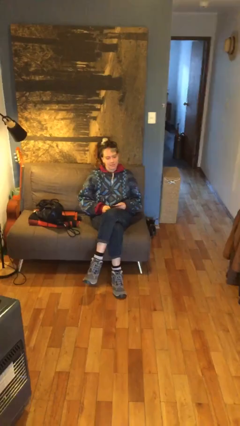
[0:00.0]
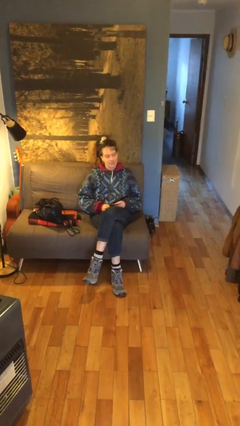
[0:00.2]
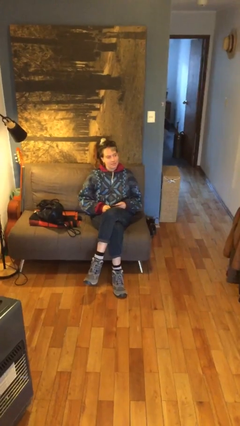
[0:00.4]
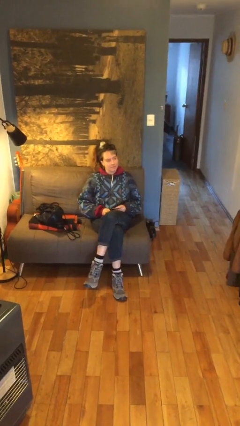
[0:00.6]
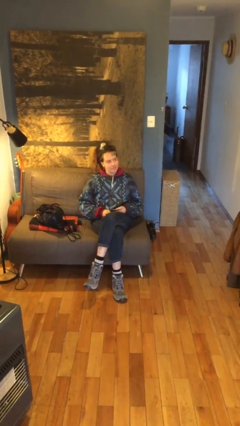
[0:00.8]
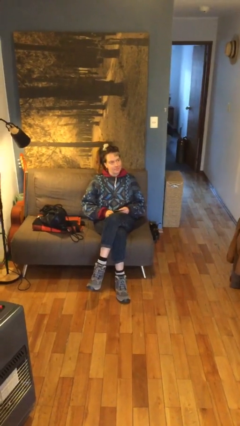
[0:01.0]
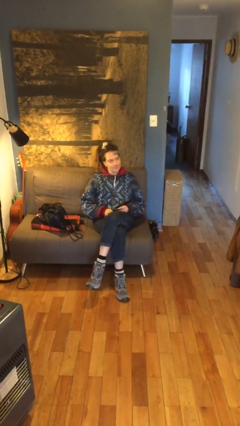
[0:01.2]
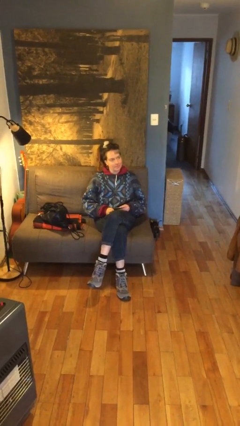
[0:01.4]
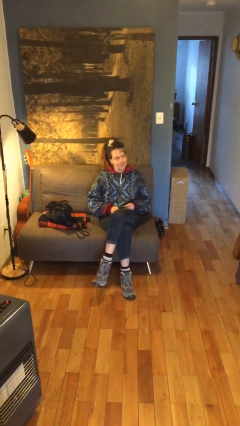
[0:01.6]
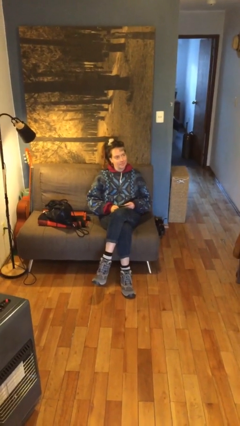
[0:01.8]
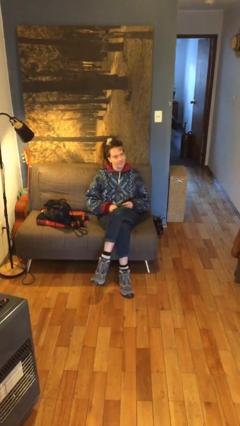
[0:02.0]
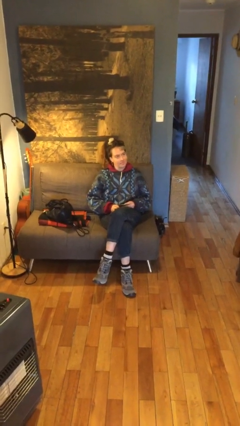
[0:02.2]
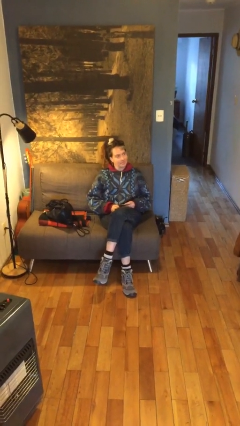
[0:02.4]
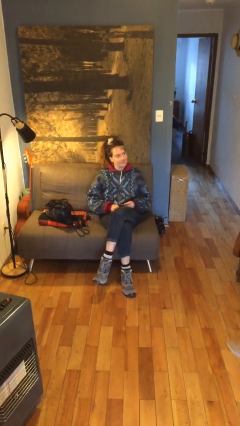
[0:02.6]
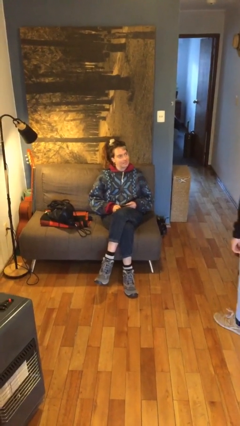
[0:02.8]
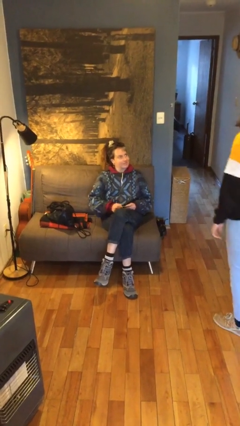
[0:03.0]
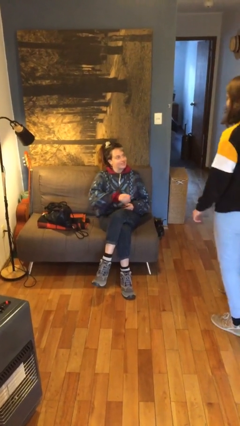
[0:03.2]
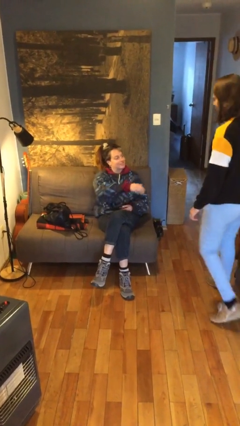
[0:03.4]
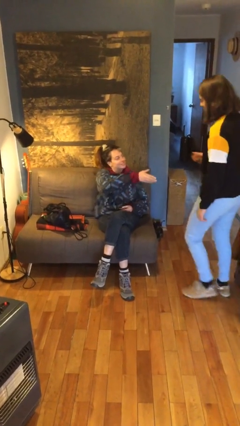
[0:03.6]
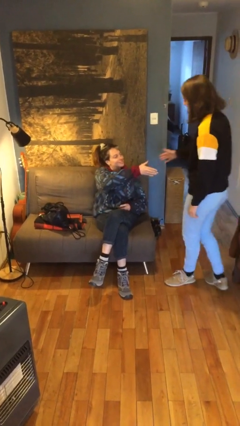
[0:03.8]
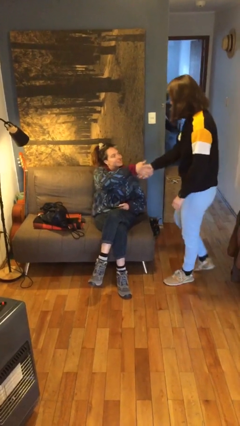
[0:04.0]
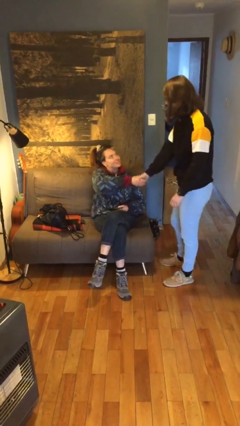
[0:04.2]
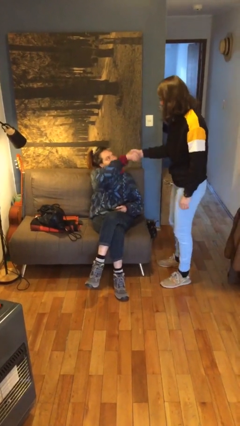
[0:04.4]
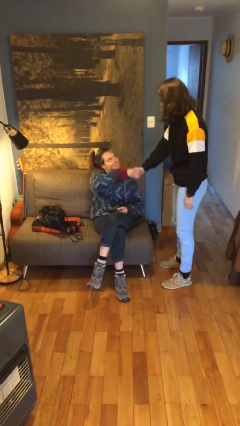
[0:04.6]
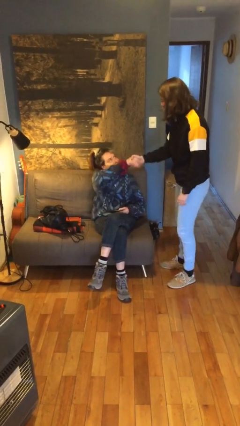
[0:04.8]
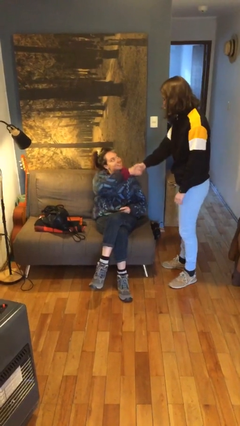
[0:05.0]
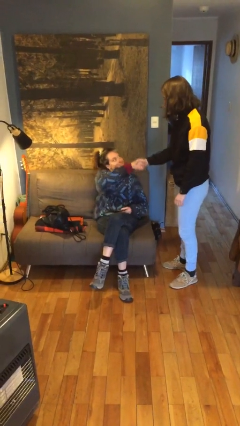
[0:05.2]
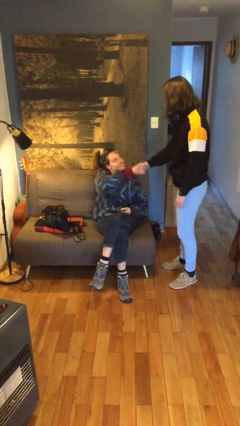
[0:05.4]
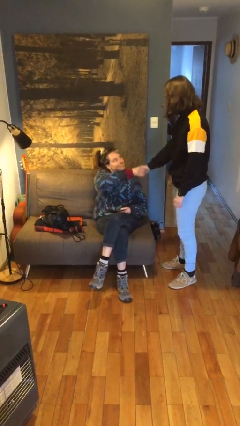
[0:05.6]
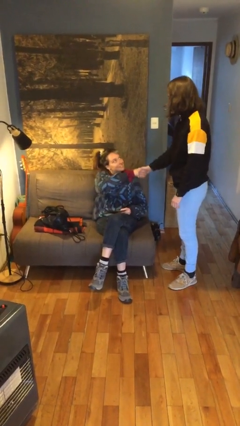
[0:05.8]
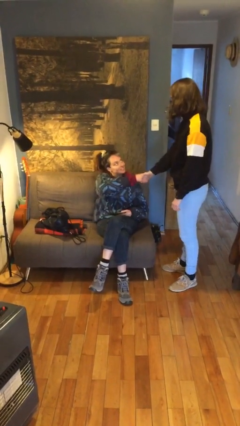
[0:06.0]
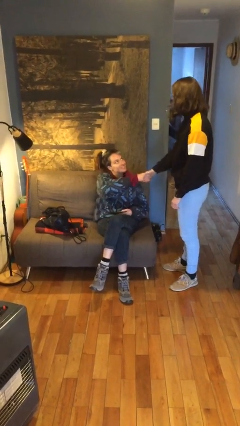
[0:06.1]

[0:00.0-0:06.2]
person shakes hand

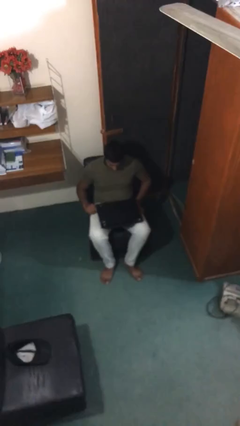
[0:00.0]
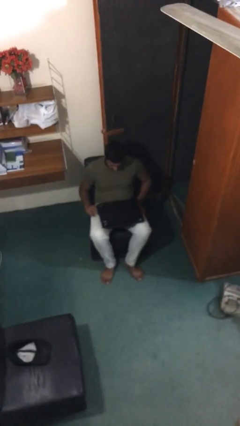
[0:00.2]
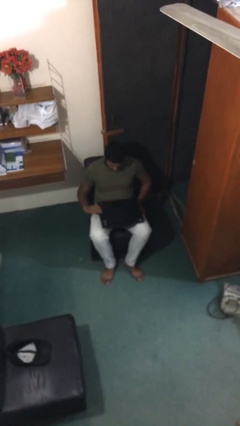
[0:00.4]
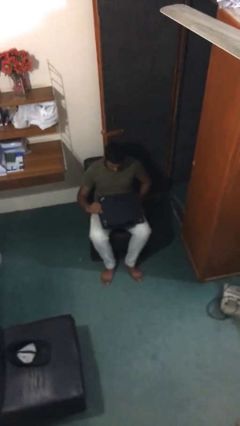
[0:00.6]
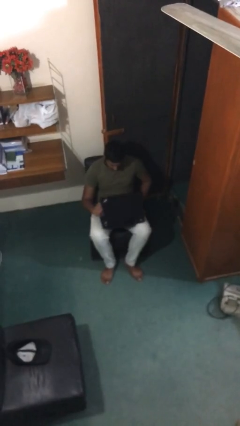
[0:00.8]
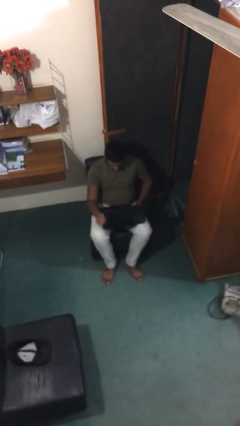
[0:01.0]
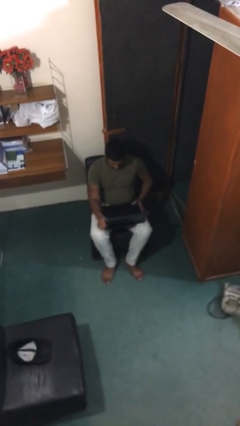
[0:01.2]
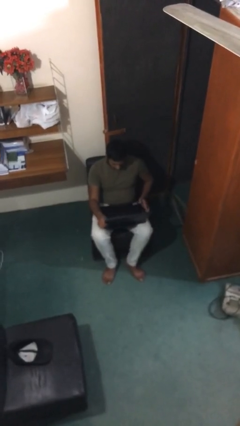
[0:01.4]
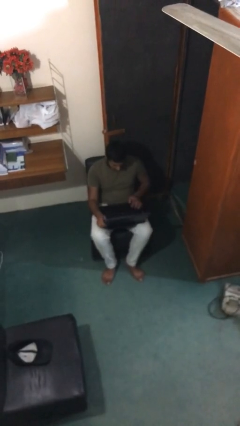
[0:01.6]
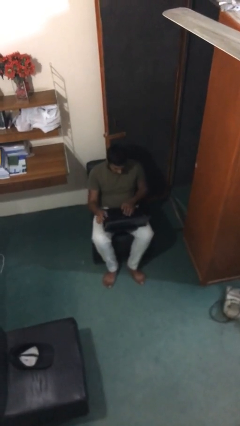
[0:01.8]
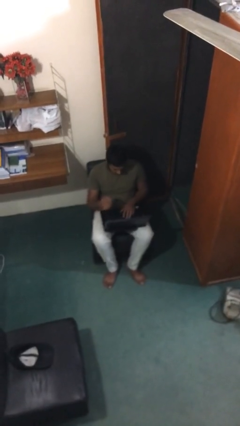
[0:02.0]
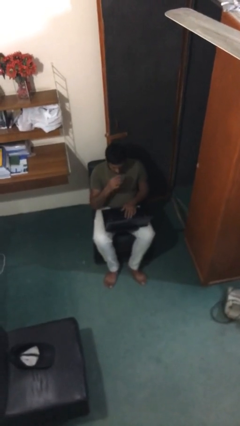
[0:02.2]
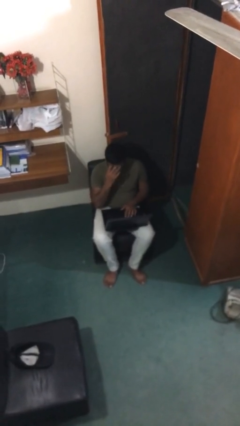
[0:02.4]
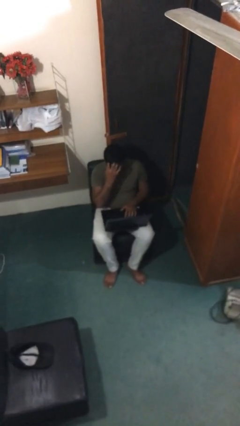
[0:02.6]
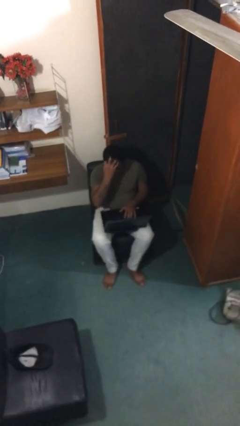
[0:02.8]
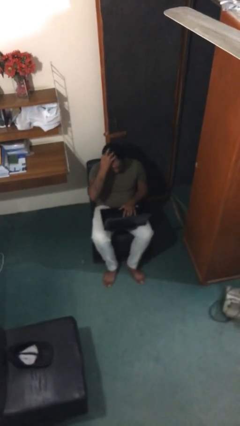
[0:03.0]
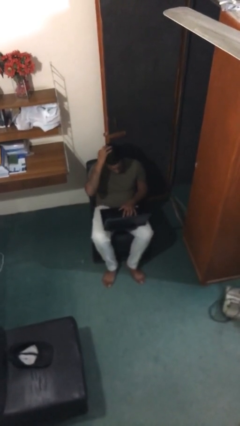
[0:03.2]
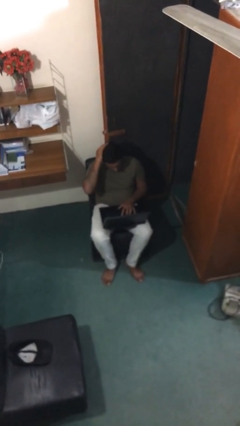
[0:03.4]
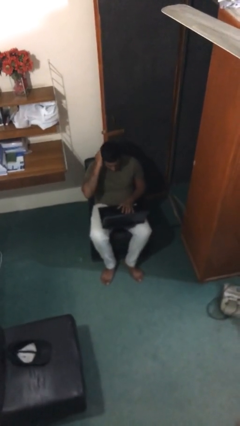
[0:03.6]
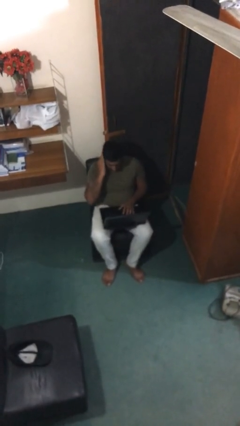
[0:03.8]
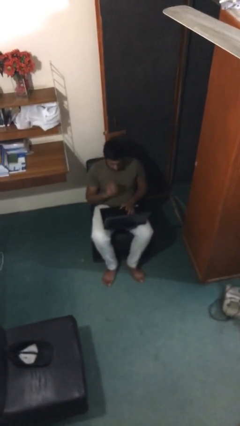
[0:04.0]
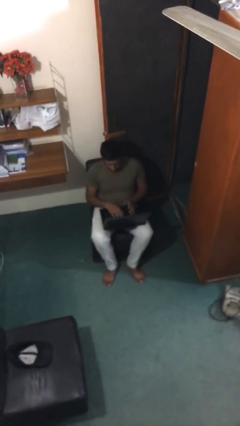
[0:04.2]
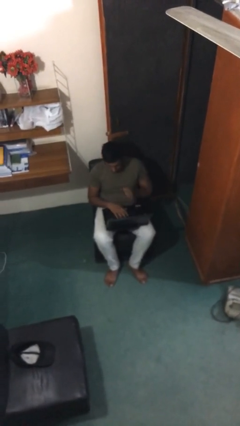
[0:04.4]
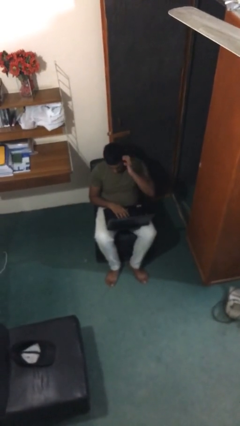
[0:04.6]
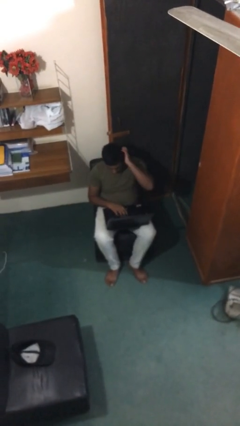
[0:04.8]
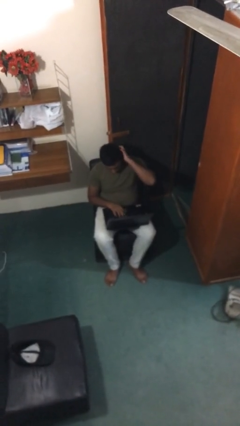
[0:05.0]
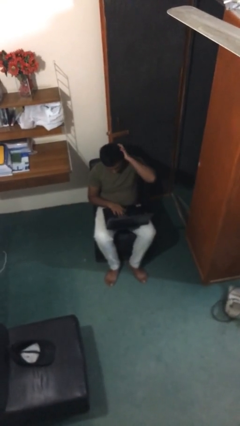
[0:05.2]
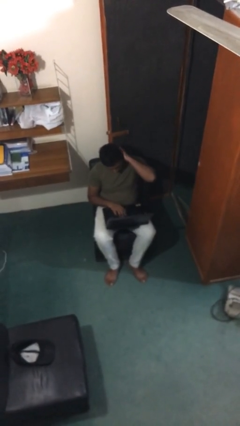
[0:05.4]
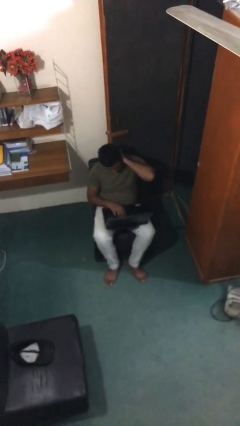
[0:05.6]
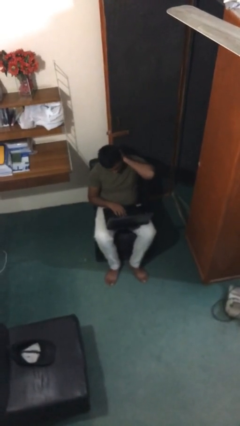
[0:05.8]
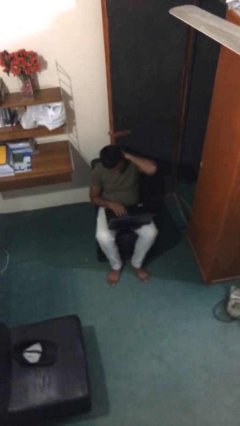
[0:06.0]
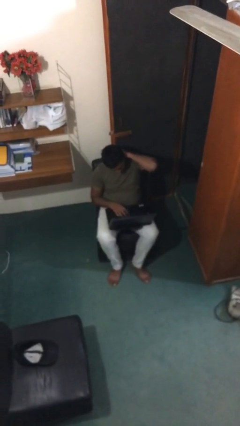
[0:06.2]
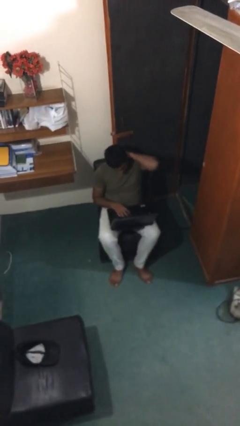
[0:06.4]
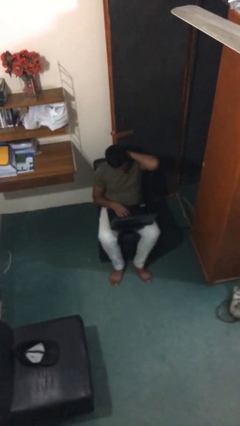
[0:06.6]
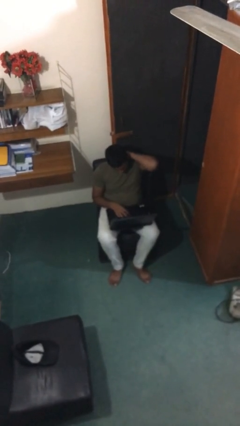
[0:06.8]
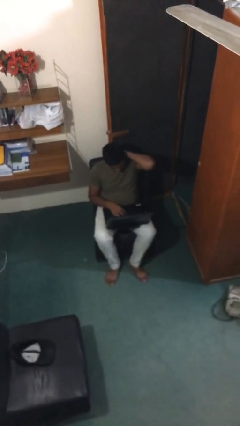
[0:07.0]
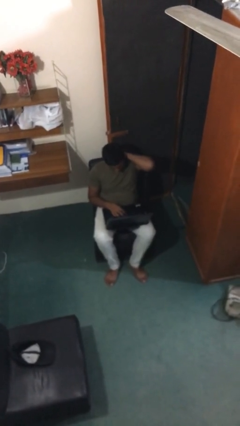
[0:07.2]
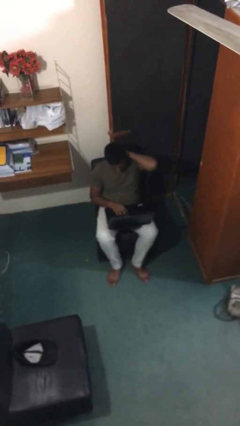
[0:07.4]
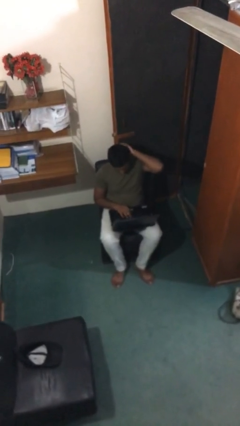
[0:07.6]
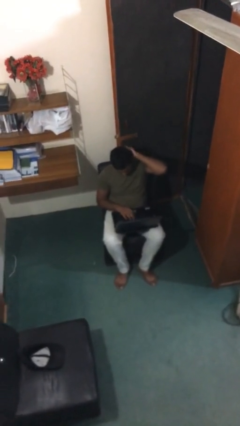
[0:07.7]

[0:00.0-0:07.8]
person interacts with laptop

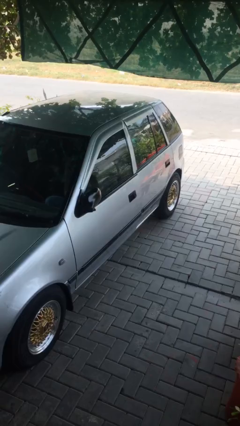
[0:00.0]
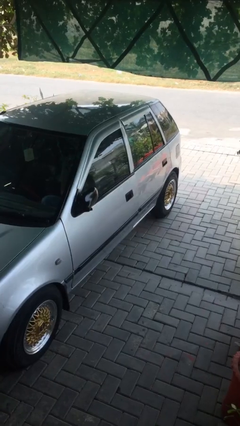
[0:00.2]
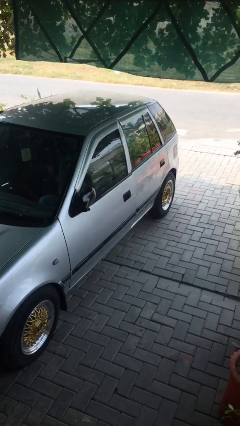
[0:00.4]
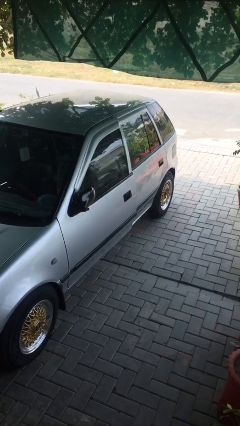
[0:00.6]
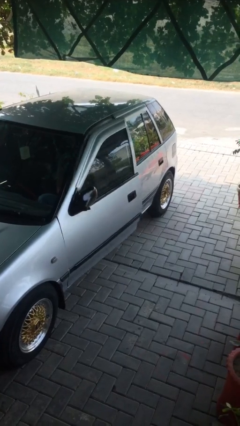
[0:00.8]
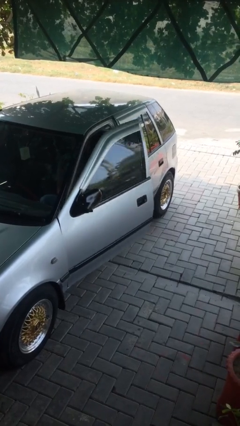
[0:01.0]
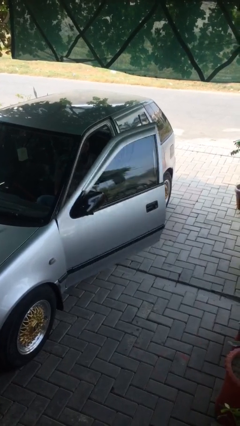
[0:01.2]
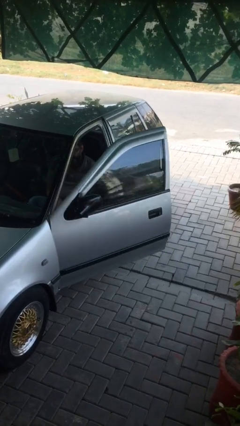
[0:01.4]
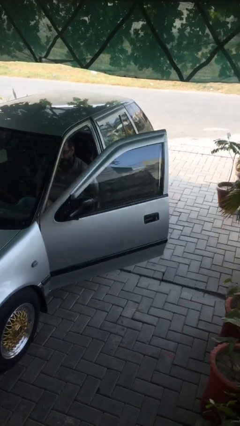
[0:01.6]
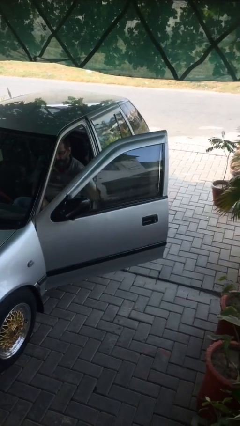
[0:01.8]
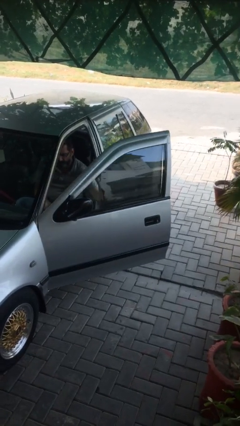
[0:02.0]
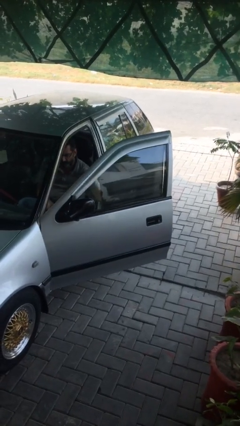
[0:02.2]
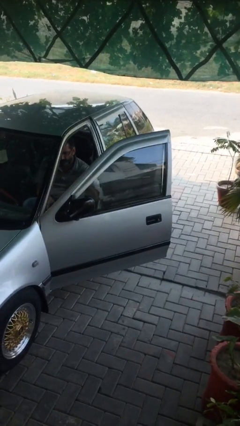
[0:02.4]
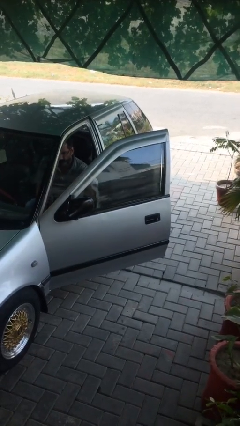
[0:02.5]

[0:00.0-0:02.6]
person opens car door

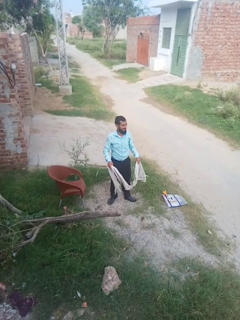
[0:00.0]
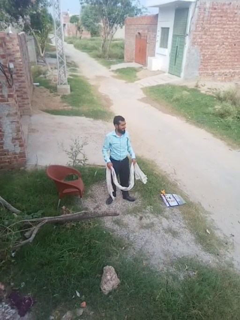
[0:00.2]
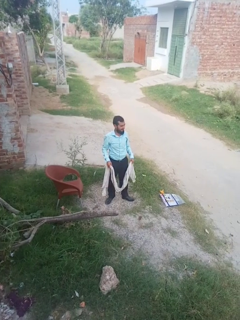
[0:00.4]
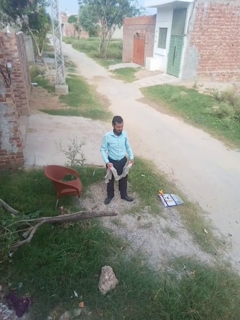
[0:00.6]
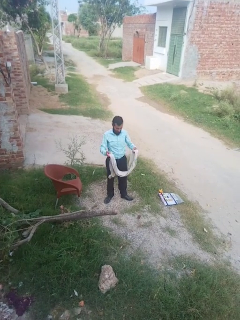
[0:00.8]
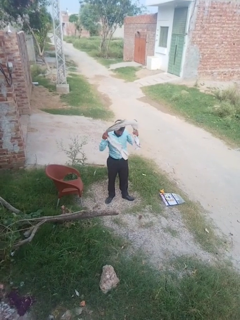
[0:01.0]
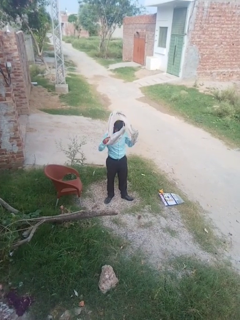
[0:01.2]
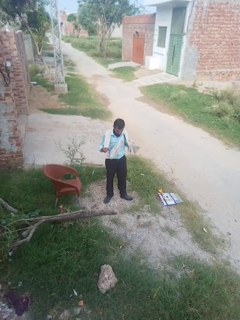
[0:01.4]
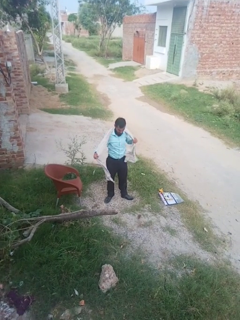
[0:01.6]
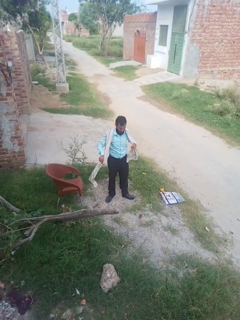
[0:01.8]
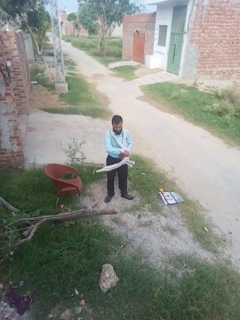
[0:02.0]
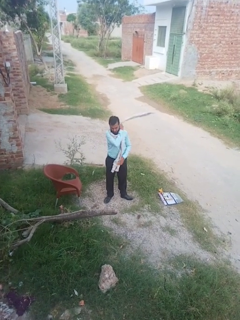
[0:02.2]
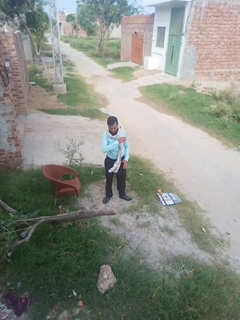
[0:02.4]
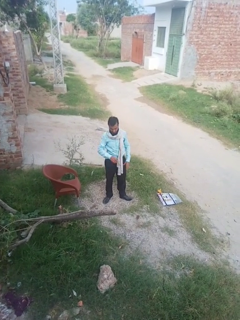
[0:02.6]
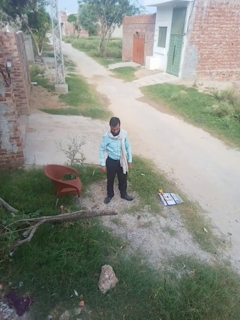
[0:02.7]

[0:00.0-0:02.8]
person puts on scarf
